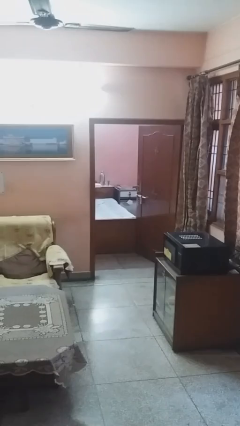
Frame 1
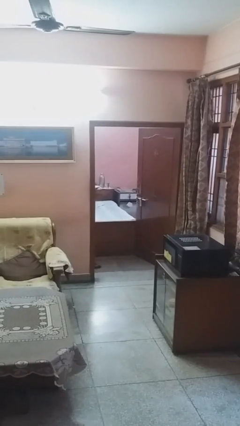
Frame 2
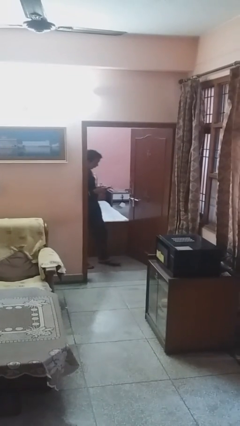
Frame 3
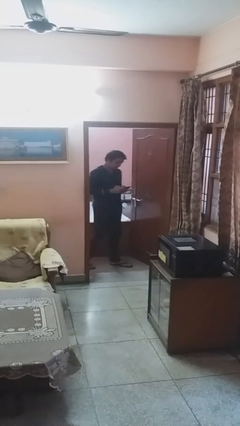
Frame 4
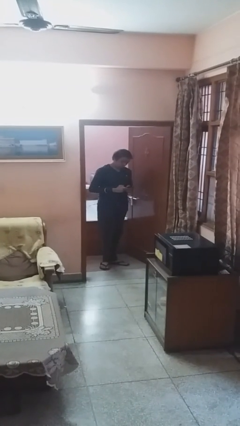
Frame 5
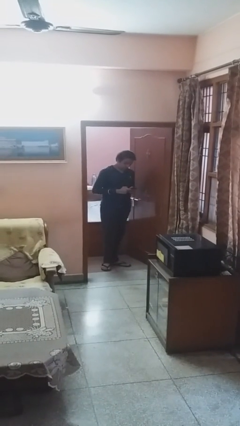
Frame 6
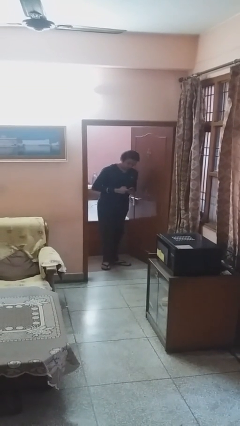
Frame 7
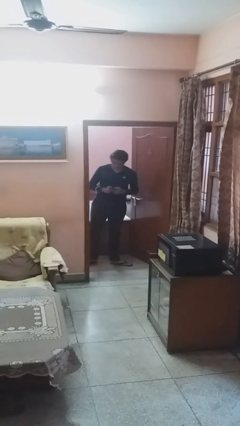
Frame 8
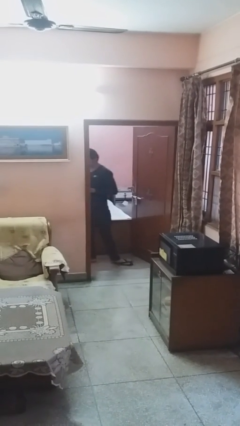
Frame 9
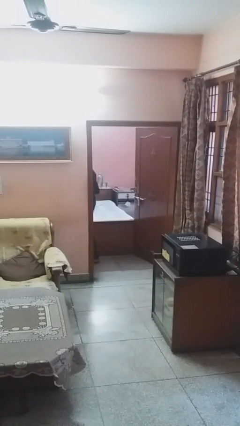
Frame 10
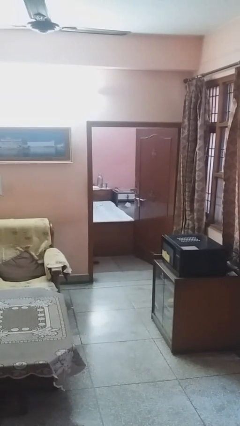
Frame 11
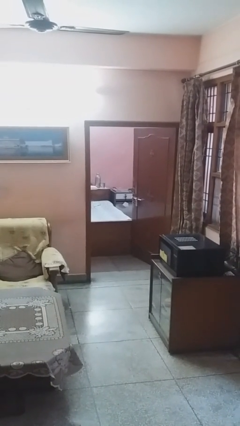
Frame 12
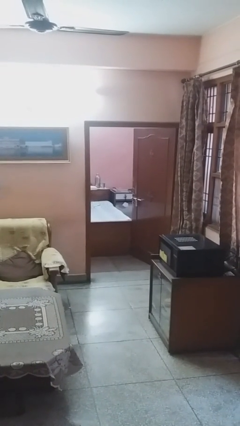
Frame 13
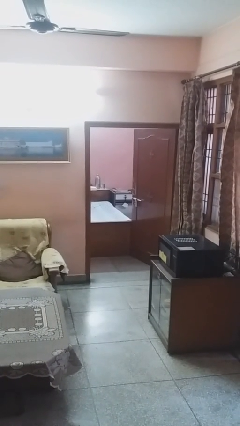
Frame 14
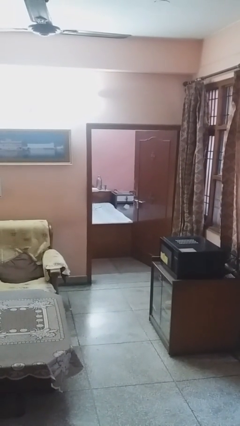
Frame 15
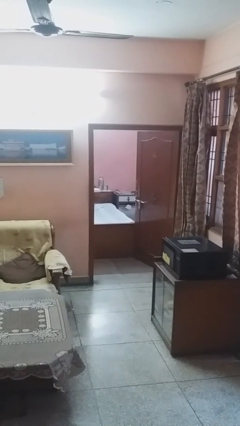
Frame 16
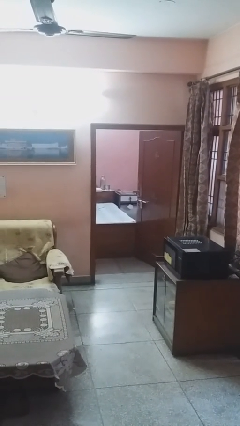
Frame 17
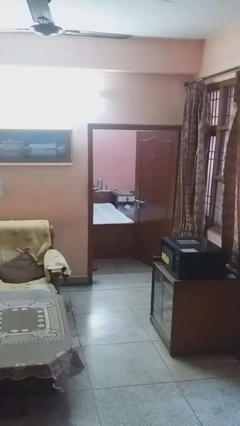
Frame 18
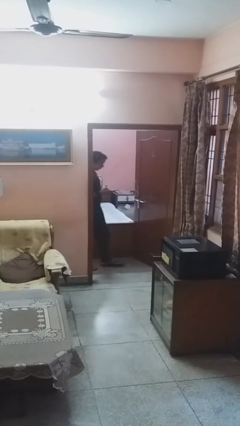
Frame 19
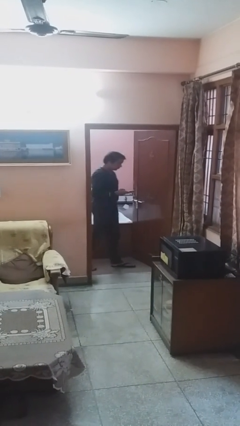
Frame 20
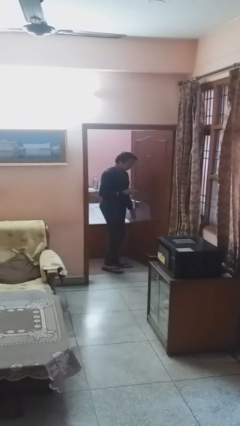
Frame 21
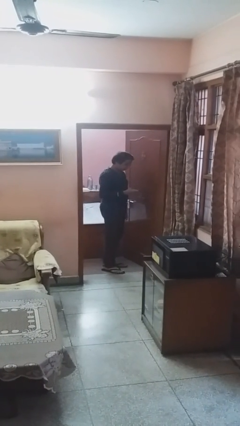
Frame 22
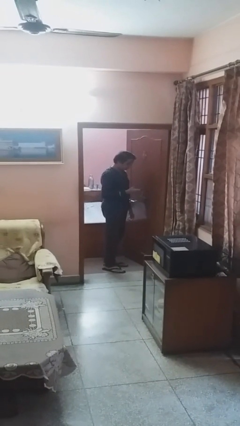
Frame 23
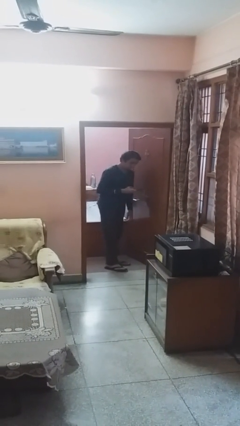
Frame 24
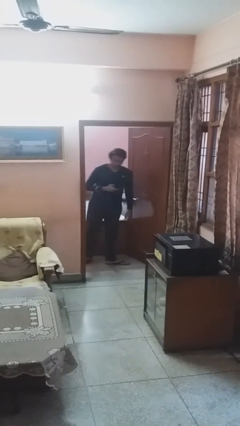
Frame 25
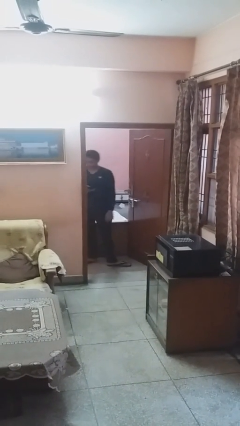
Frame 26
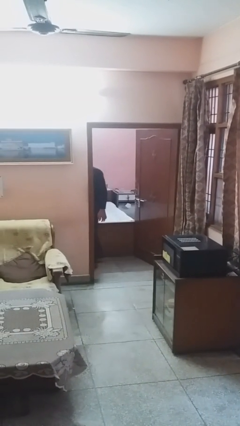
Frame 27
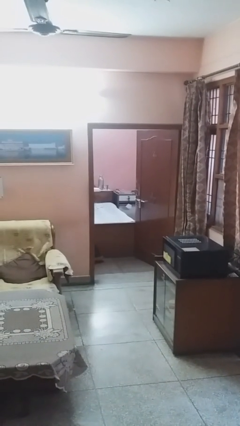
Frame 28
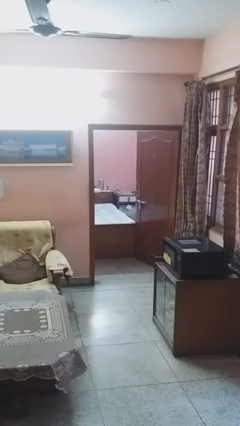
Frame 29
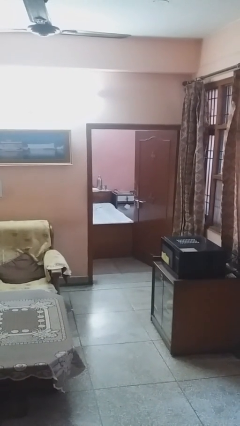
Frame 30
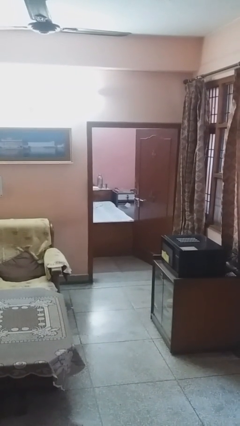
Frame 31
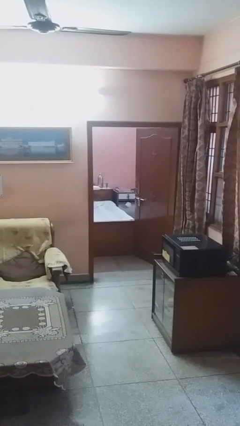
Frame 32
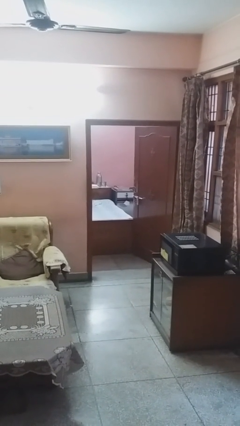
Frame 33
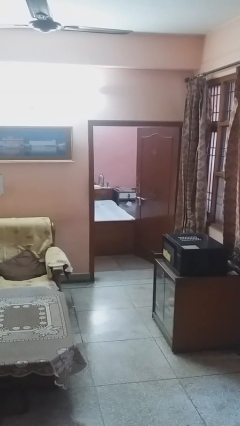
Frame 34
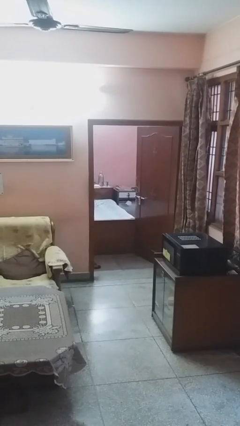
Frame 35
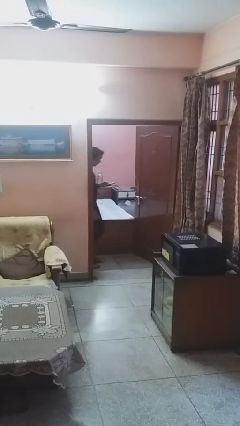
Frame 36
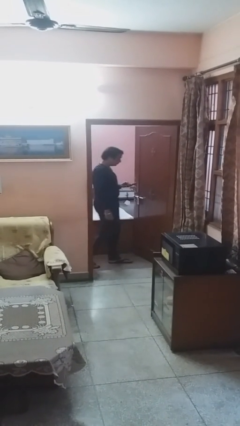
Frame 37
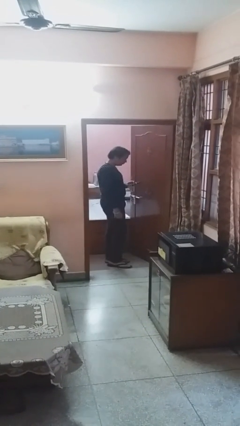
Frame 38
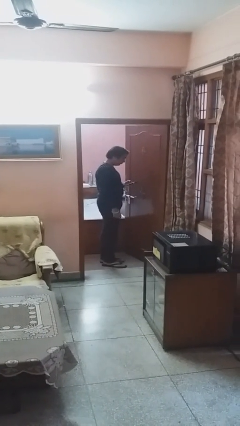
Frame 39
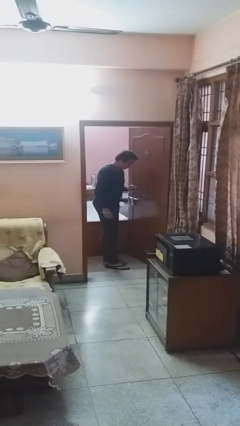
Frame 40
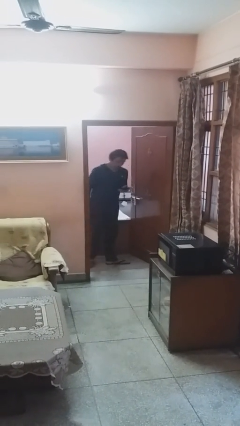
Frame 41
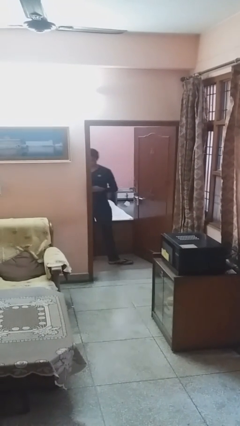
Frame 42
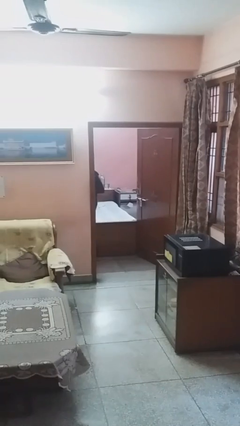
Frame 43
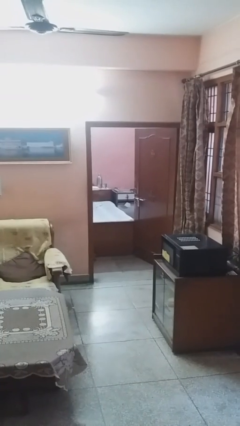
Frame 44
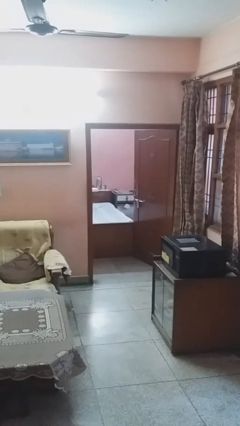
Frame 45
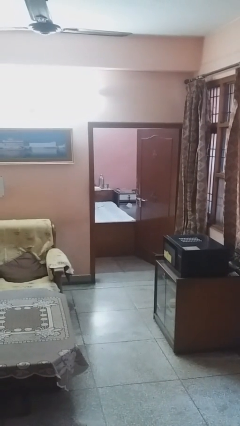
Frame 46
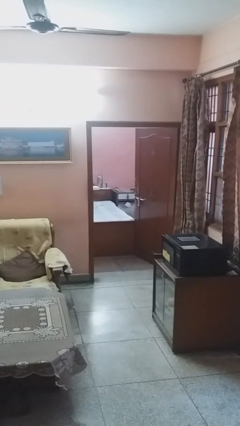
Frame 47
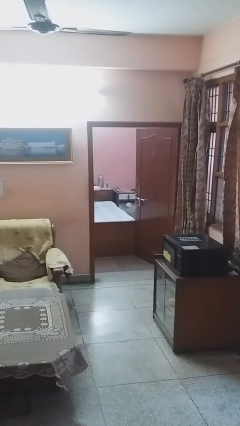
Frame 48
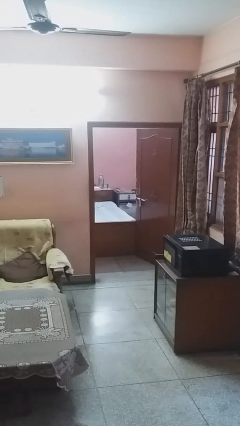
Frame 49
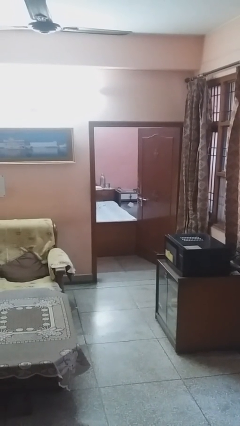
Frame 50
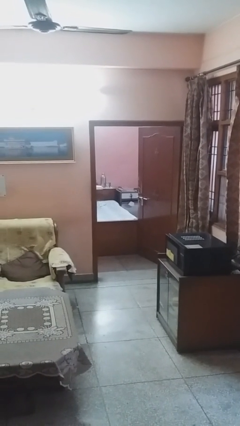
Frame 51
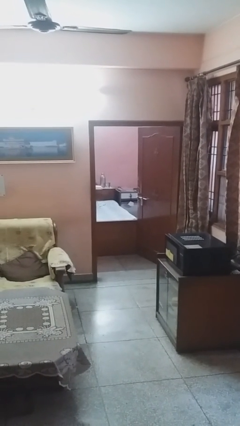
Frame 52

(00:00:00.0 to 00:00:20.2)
person texts on phone

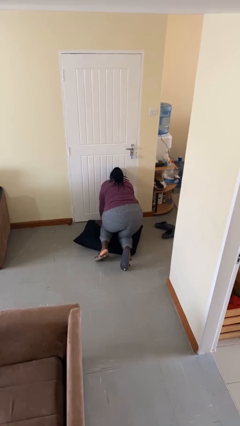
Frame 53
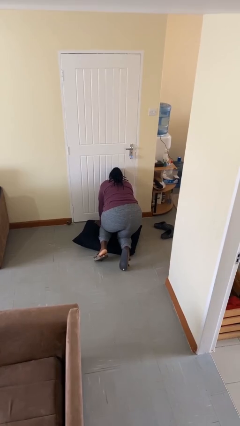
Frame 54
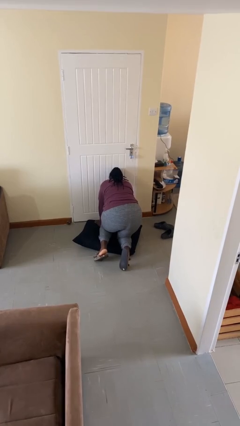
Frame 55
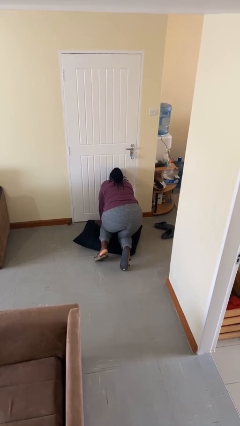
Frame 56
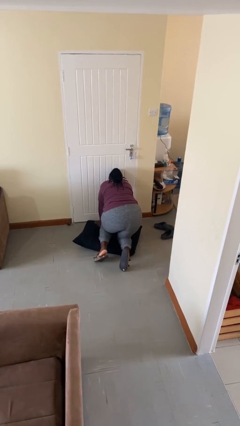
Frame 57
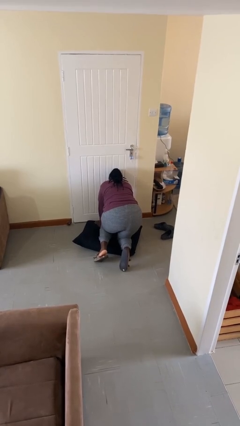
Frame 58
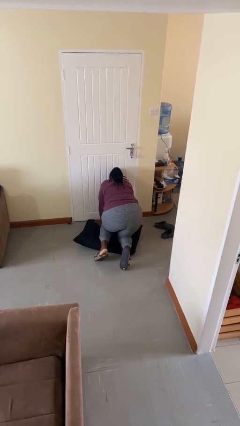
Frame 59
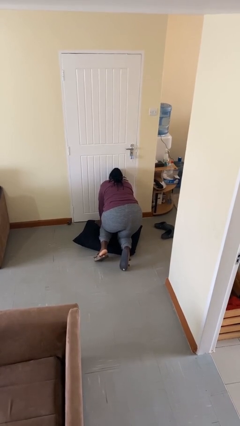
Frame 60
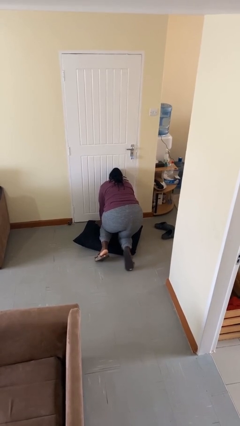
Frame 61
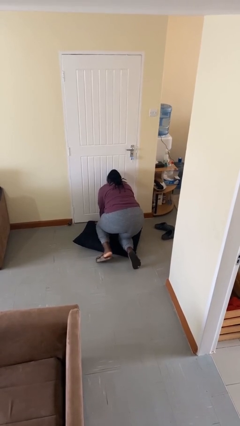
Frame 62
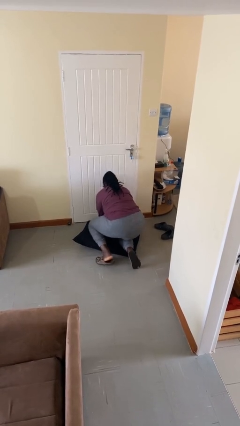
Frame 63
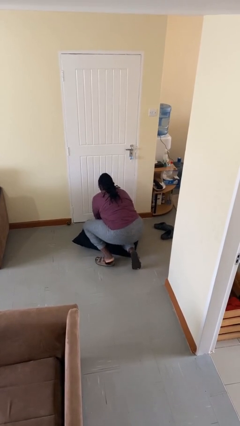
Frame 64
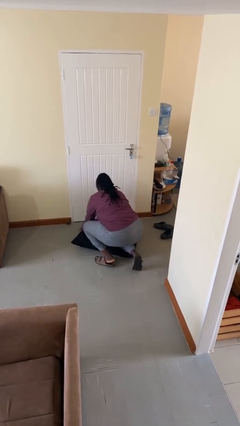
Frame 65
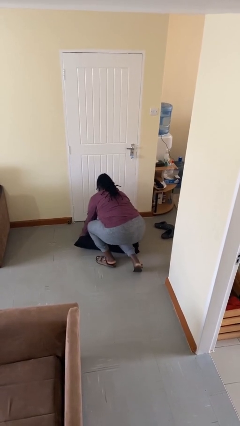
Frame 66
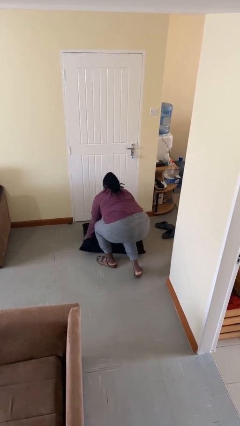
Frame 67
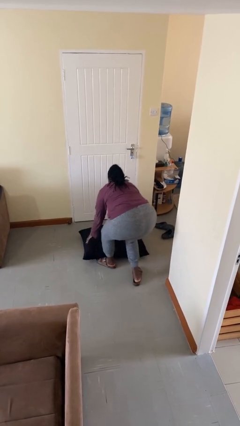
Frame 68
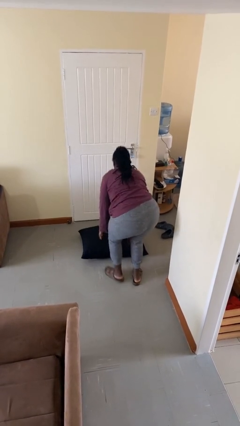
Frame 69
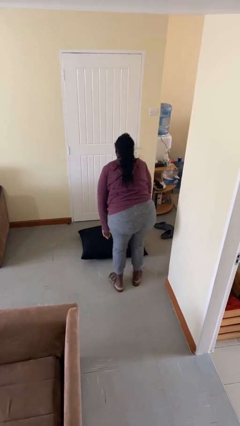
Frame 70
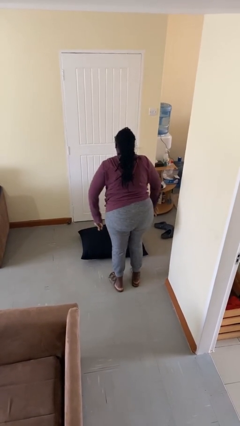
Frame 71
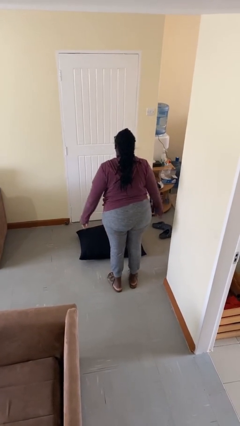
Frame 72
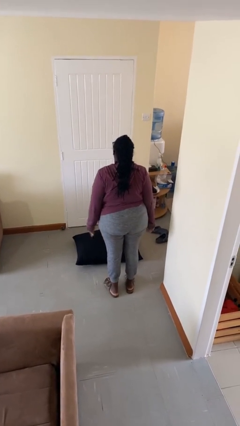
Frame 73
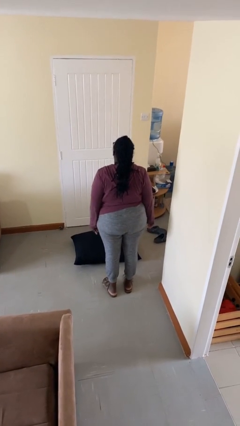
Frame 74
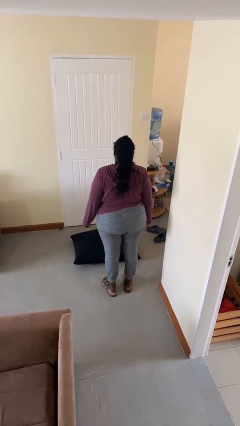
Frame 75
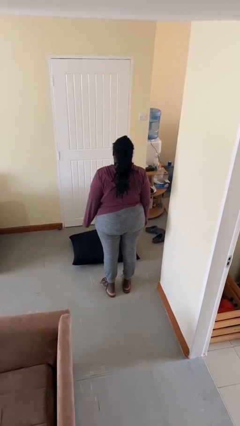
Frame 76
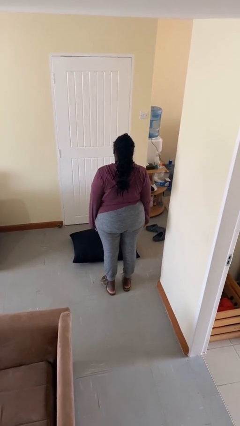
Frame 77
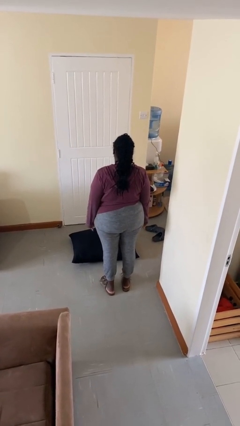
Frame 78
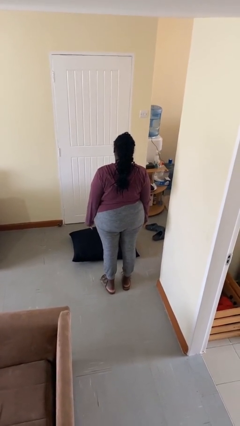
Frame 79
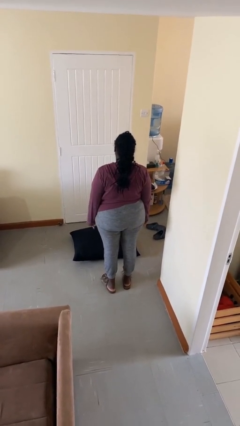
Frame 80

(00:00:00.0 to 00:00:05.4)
person stands up from floor

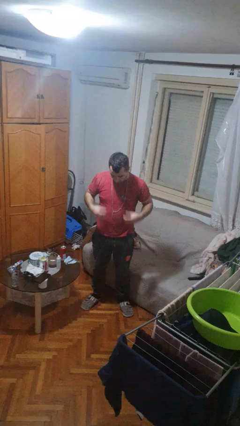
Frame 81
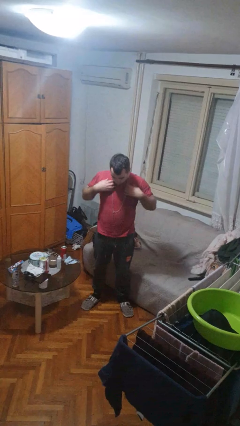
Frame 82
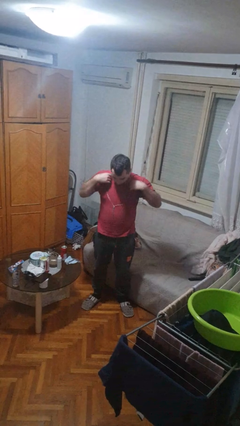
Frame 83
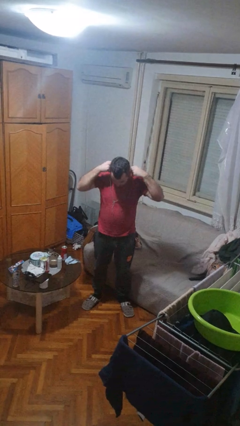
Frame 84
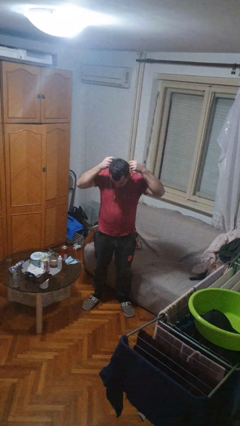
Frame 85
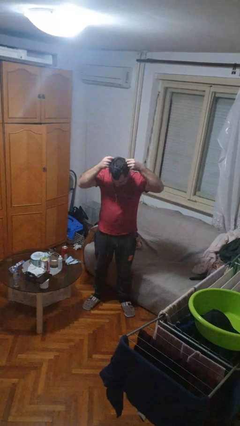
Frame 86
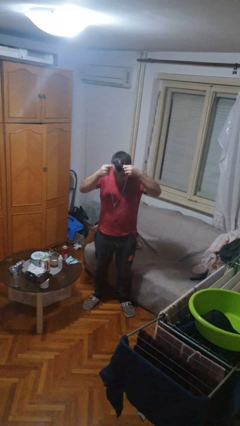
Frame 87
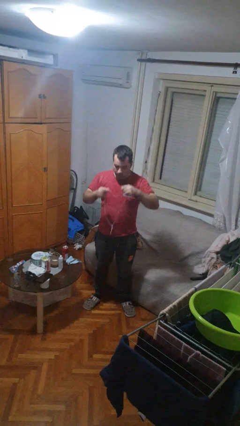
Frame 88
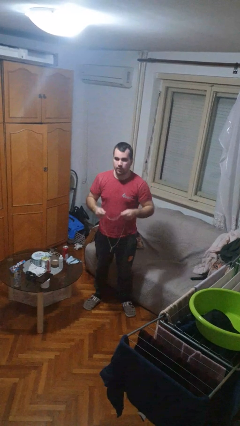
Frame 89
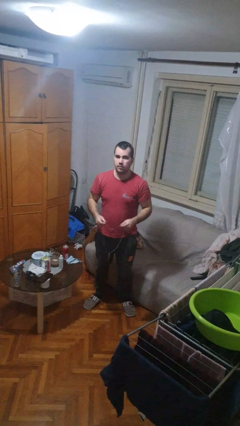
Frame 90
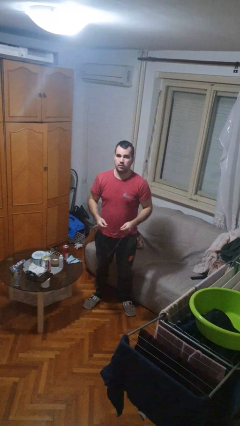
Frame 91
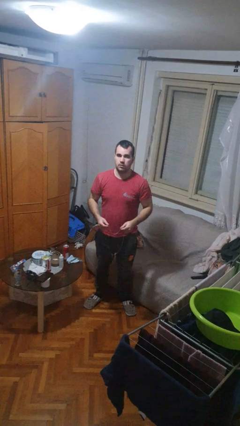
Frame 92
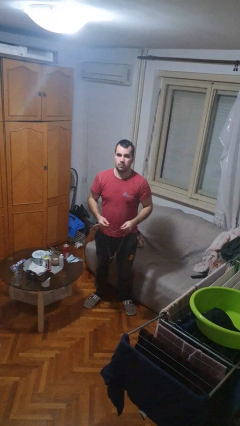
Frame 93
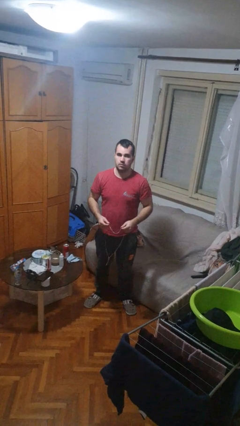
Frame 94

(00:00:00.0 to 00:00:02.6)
person takes off necklace
